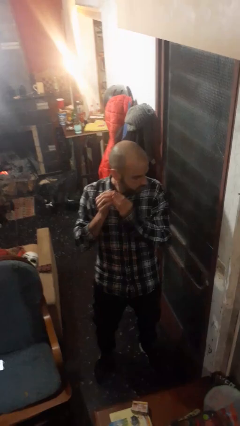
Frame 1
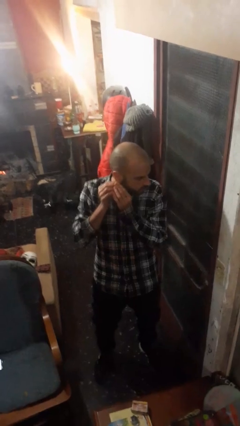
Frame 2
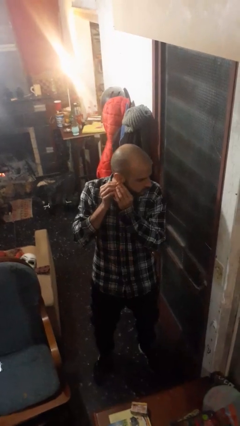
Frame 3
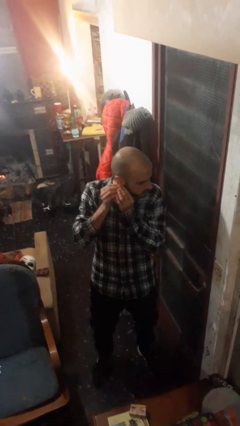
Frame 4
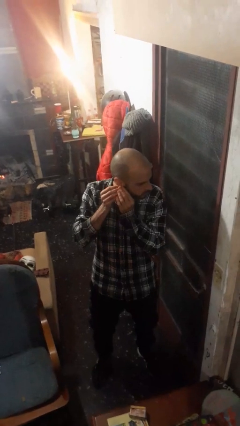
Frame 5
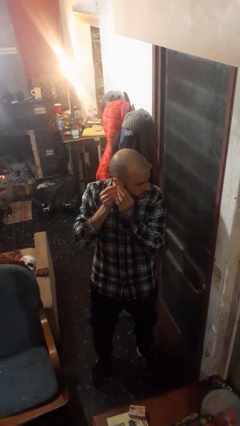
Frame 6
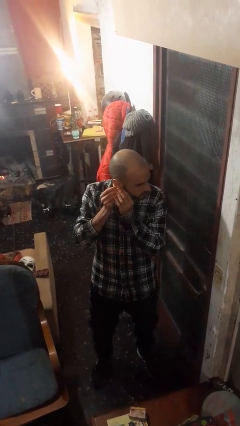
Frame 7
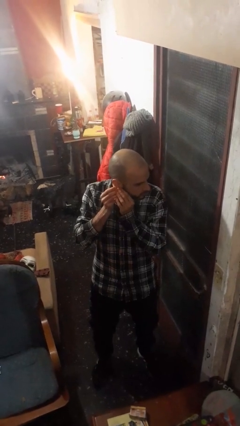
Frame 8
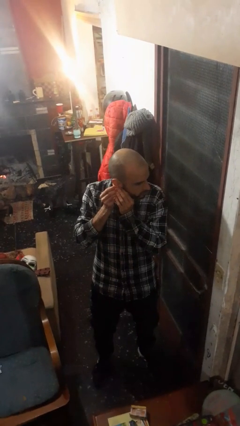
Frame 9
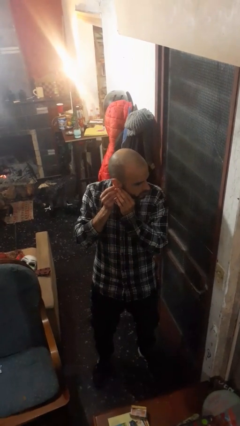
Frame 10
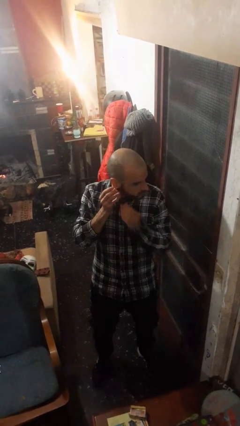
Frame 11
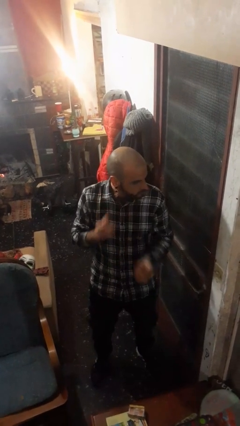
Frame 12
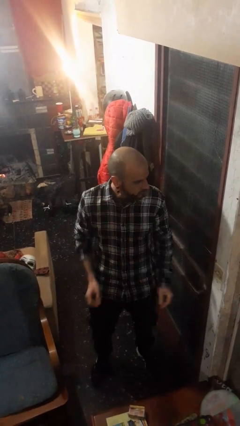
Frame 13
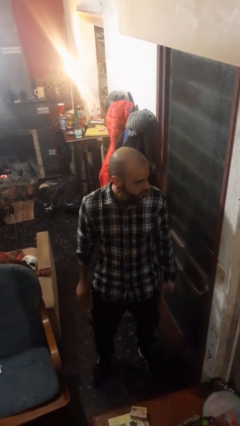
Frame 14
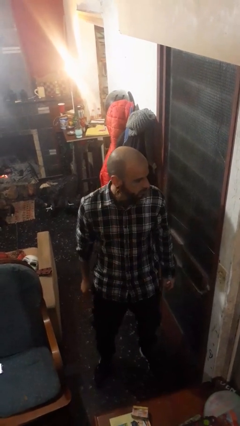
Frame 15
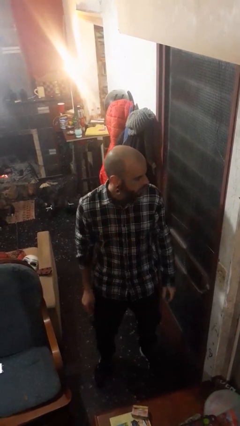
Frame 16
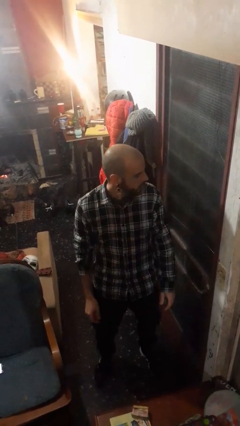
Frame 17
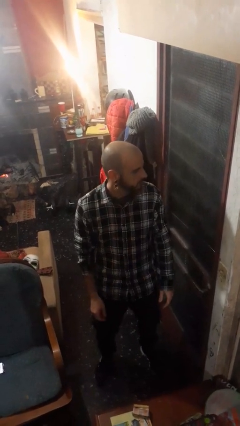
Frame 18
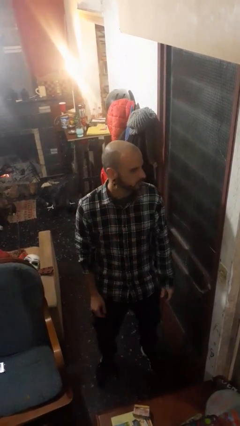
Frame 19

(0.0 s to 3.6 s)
person puts on earrings

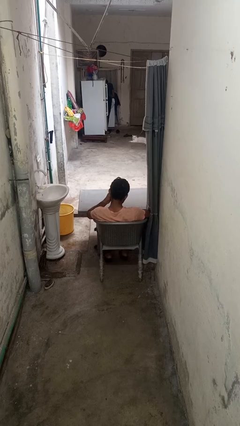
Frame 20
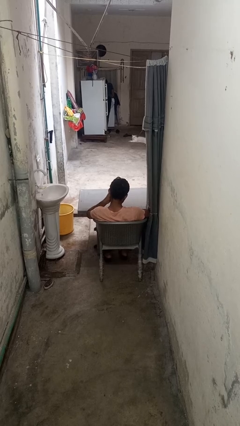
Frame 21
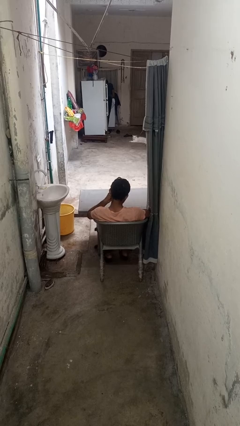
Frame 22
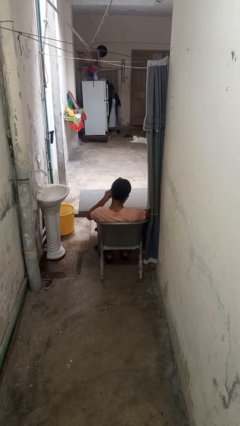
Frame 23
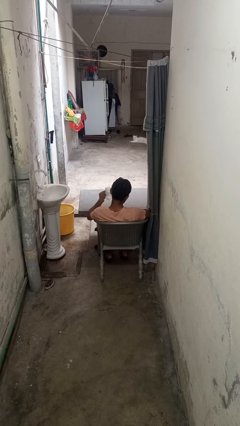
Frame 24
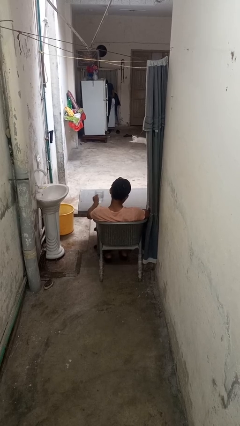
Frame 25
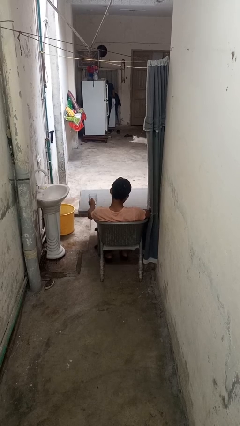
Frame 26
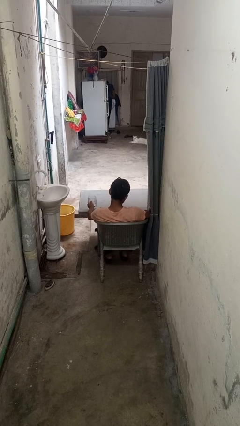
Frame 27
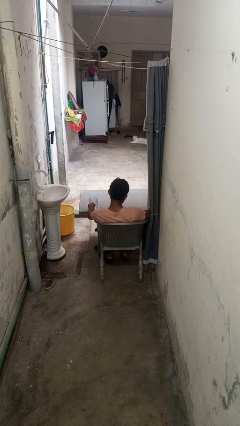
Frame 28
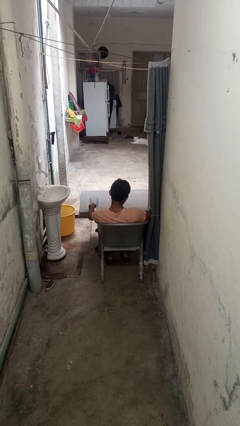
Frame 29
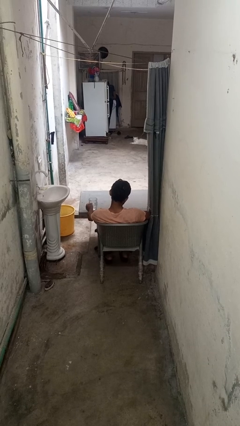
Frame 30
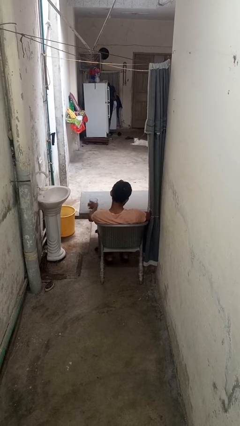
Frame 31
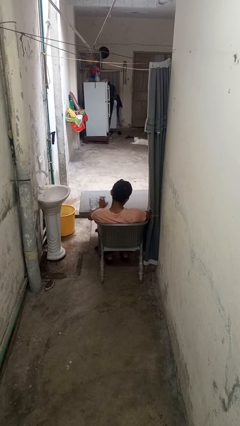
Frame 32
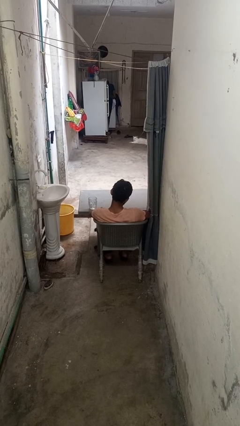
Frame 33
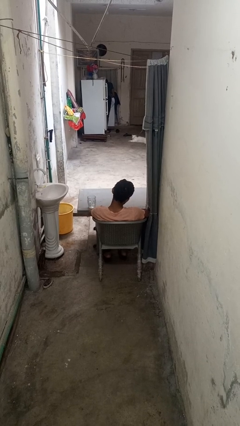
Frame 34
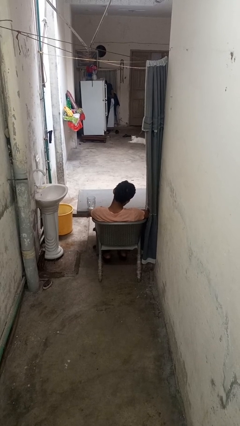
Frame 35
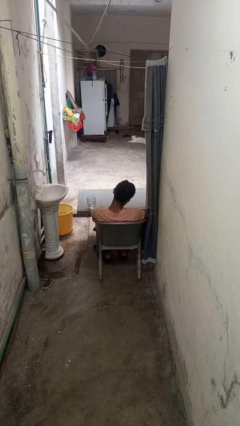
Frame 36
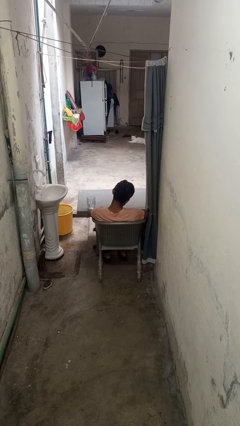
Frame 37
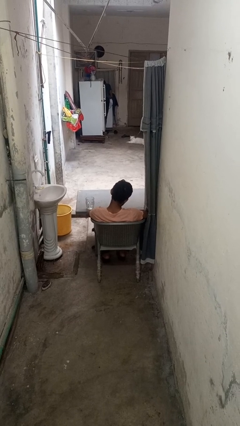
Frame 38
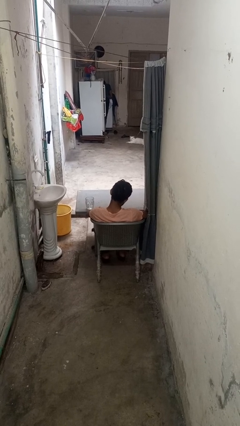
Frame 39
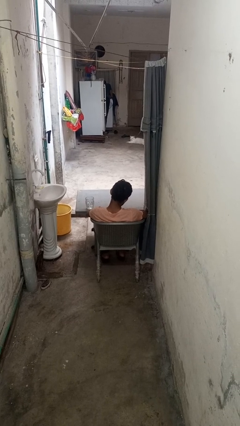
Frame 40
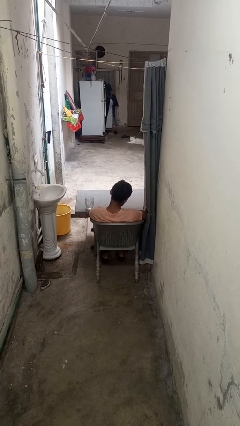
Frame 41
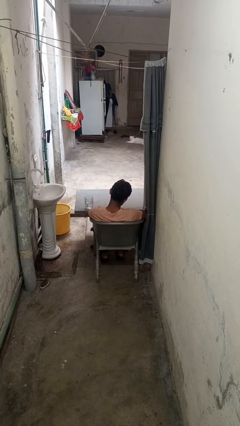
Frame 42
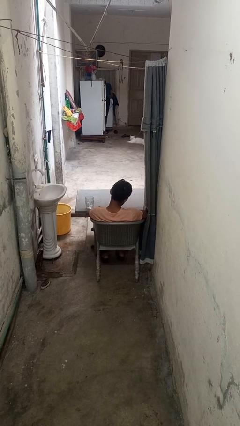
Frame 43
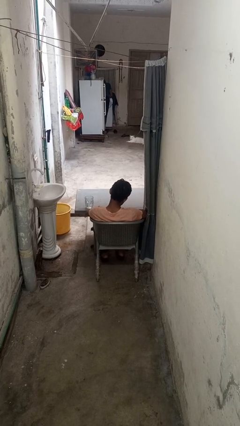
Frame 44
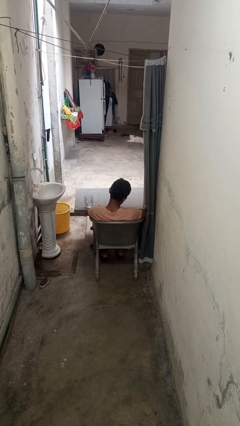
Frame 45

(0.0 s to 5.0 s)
person puts down object on table

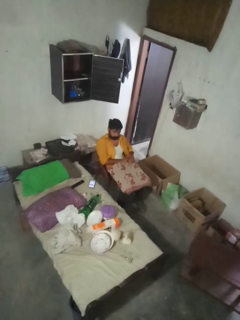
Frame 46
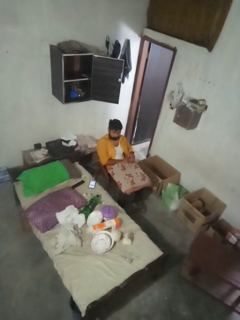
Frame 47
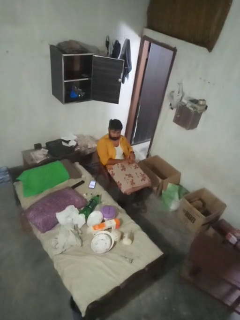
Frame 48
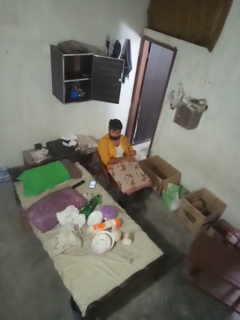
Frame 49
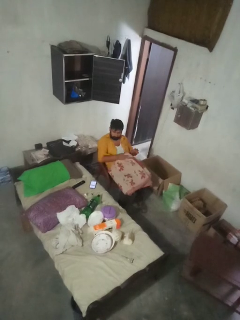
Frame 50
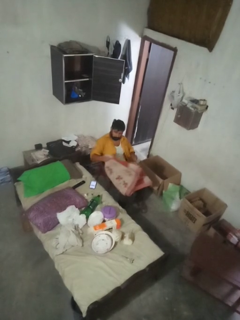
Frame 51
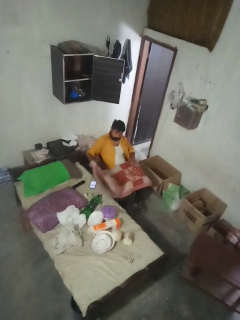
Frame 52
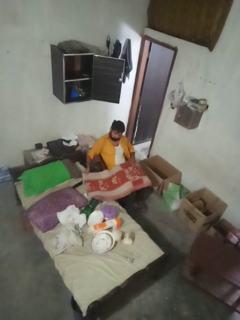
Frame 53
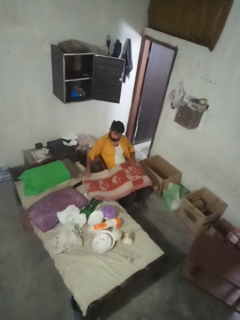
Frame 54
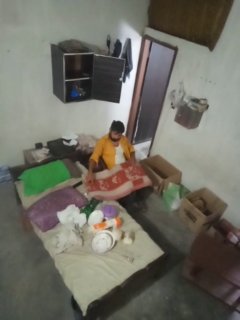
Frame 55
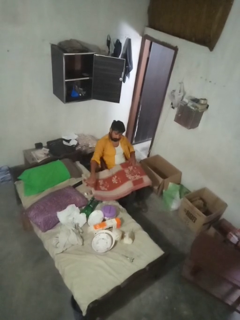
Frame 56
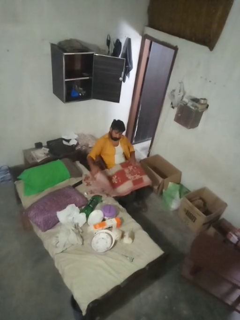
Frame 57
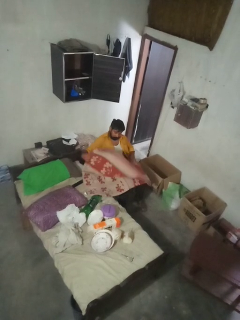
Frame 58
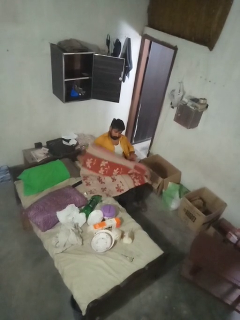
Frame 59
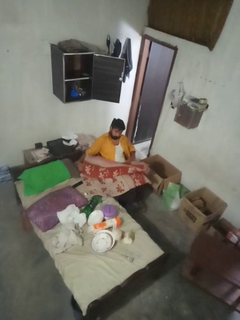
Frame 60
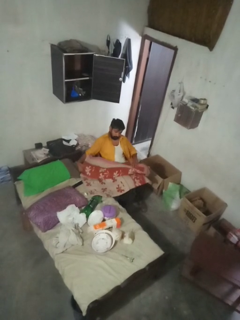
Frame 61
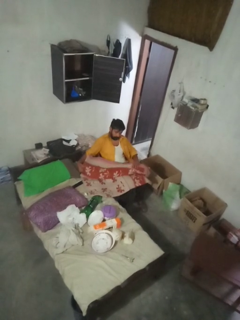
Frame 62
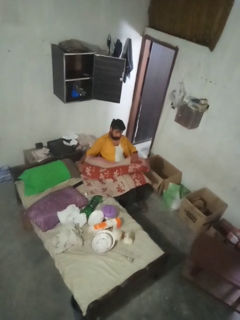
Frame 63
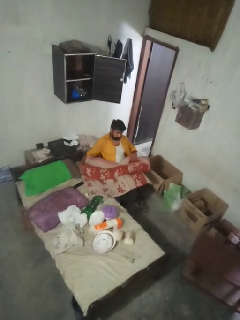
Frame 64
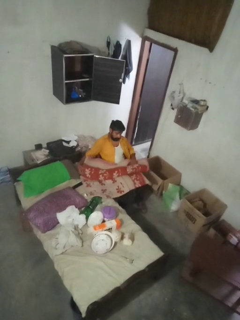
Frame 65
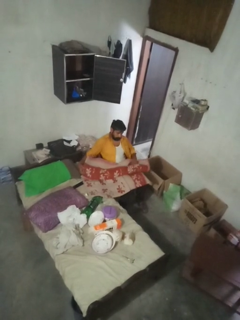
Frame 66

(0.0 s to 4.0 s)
person unfolds blanket

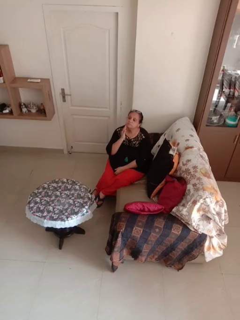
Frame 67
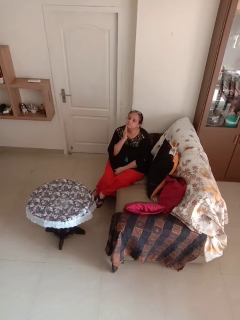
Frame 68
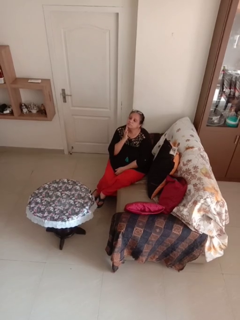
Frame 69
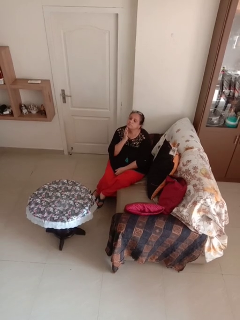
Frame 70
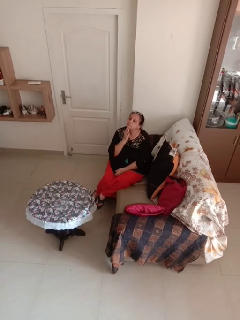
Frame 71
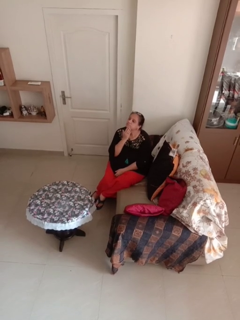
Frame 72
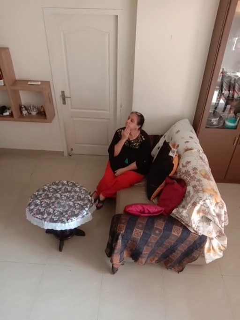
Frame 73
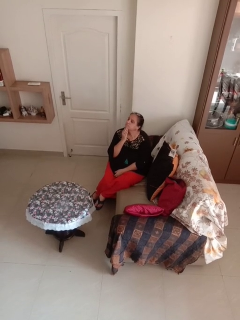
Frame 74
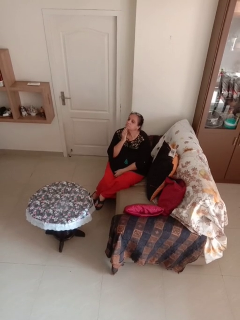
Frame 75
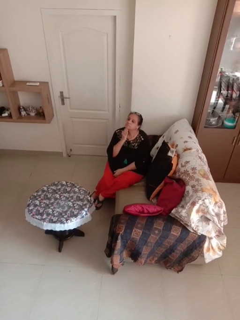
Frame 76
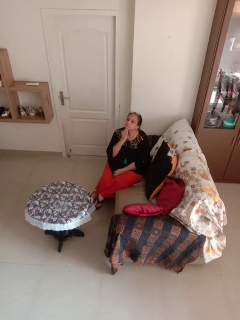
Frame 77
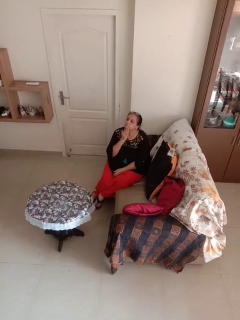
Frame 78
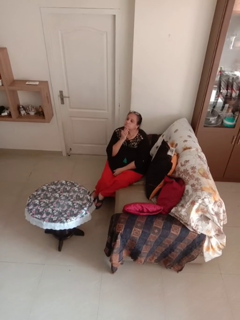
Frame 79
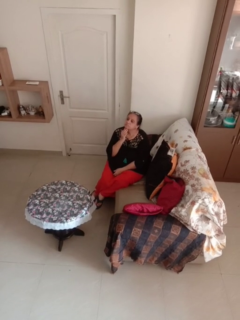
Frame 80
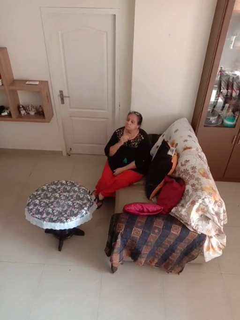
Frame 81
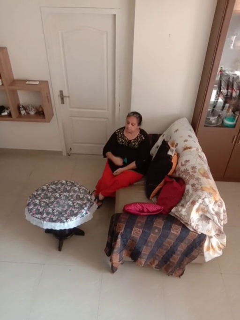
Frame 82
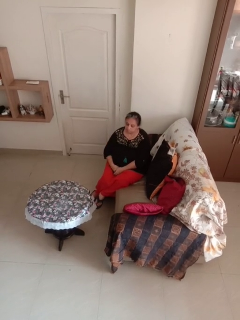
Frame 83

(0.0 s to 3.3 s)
person strokes chin

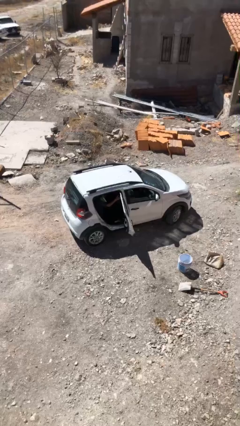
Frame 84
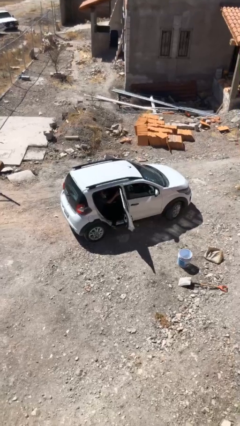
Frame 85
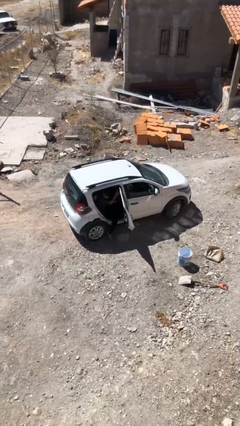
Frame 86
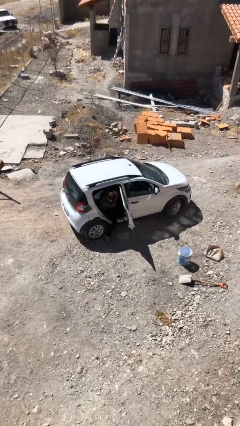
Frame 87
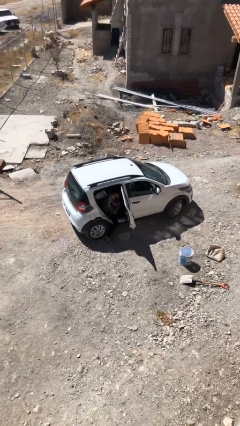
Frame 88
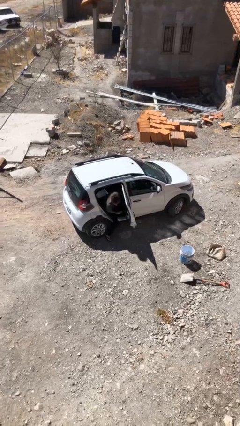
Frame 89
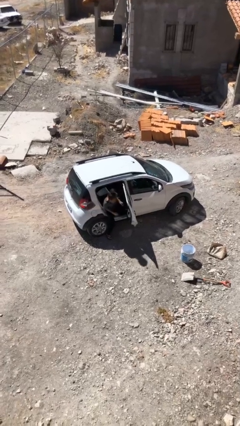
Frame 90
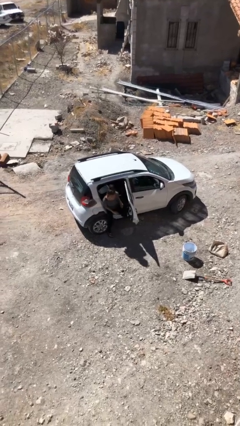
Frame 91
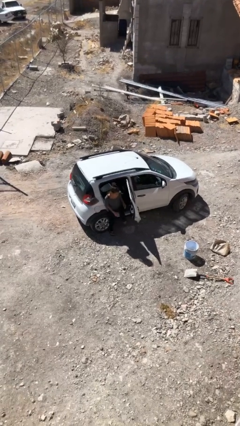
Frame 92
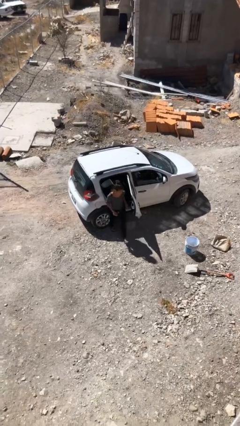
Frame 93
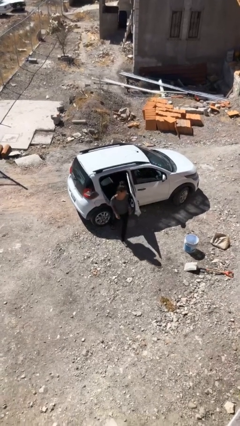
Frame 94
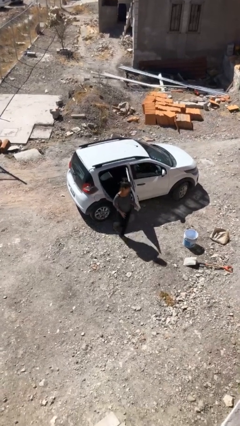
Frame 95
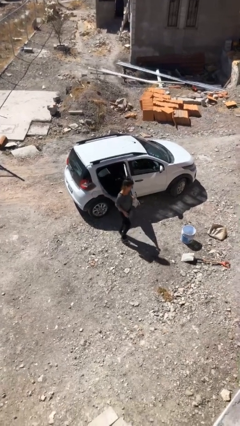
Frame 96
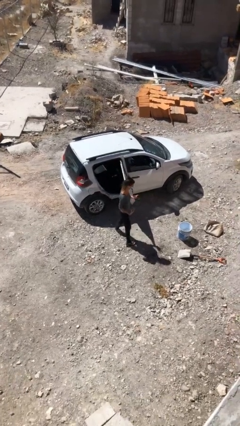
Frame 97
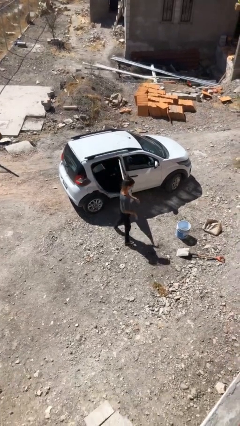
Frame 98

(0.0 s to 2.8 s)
person exits car

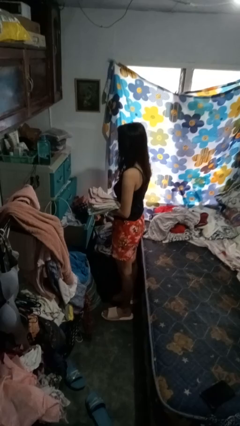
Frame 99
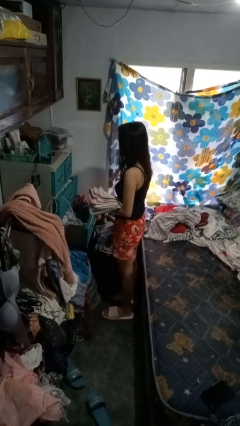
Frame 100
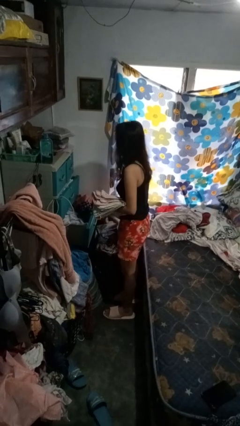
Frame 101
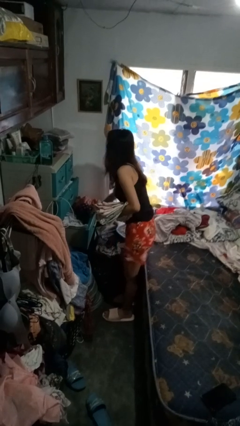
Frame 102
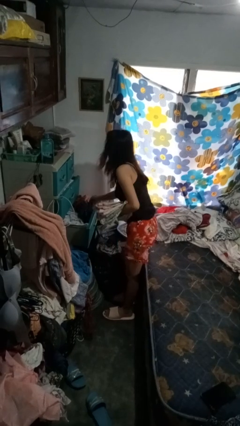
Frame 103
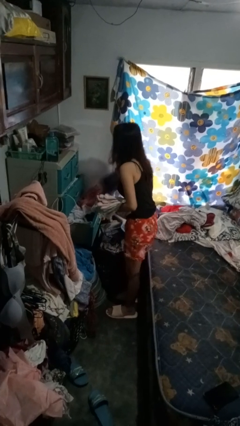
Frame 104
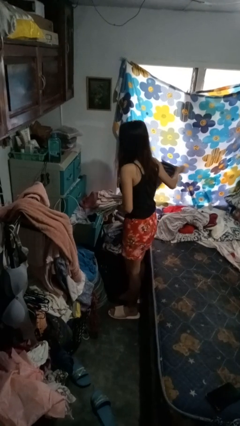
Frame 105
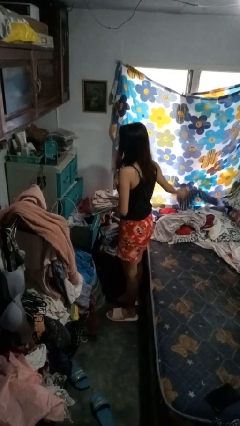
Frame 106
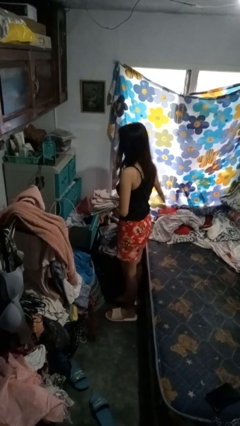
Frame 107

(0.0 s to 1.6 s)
person takes clothes from dresser
